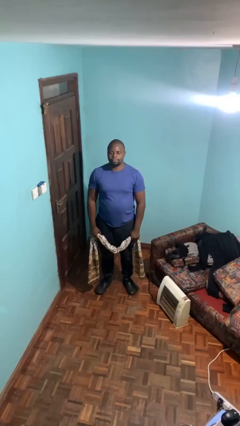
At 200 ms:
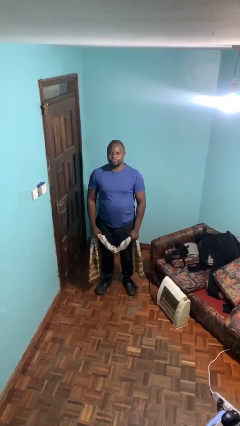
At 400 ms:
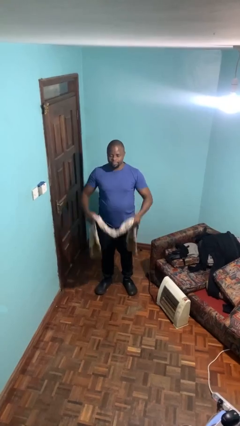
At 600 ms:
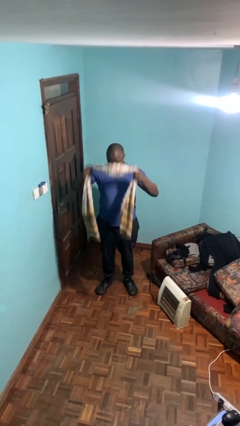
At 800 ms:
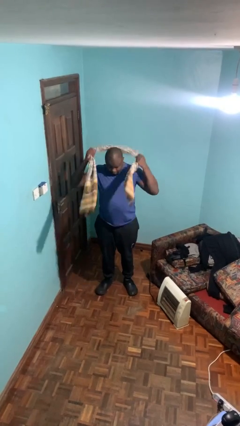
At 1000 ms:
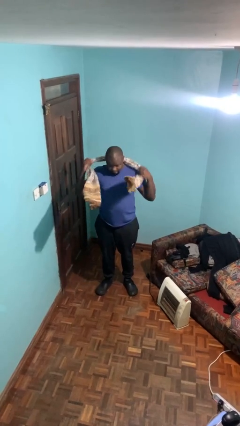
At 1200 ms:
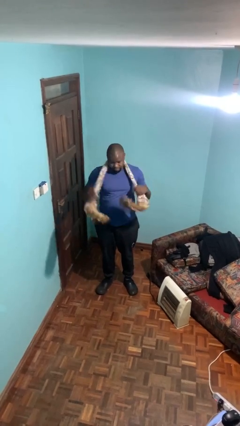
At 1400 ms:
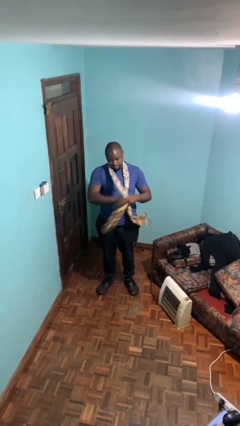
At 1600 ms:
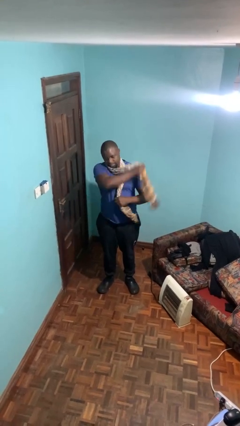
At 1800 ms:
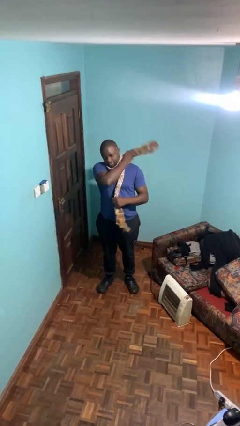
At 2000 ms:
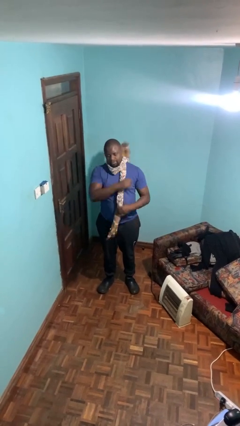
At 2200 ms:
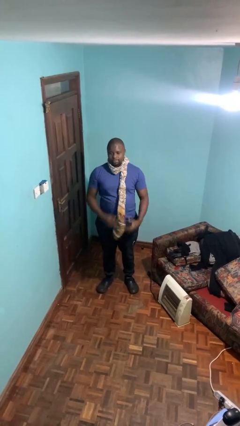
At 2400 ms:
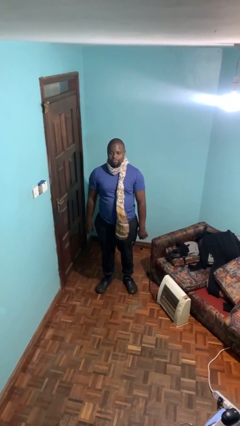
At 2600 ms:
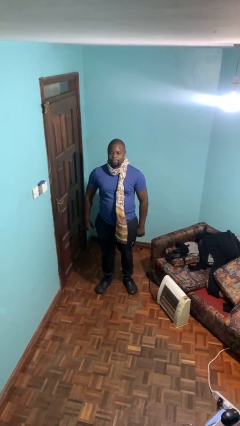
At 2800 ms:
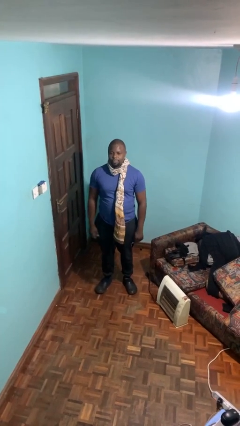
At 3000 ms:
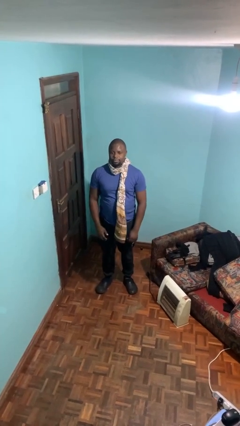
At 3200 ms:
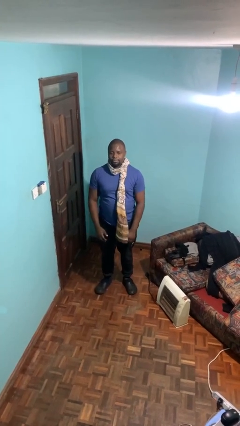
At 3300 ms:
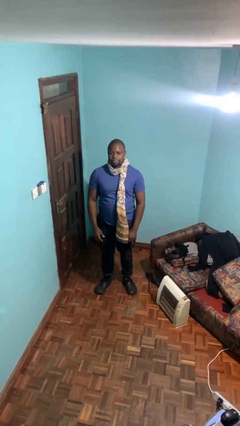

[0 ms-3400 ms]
person puts on scarf

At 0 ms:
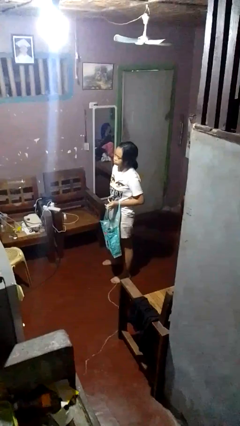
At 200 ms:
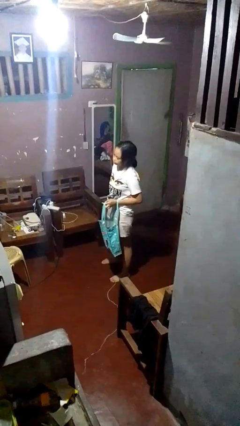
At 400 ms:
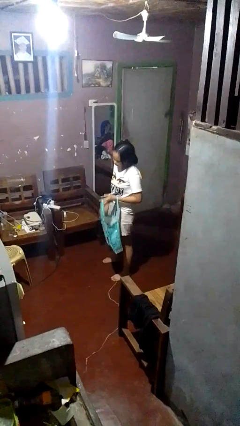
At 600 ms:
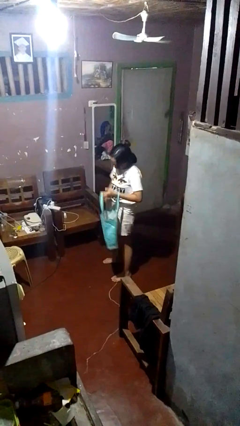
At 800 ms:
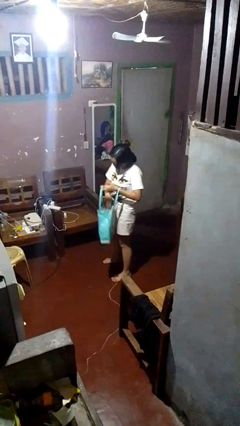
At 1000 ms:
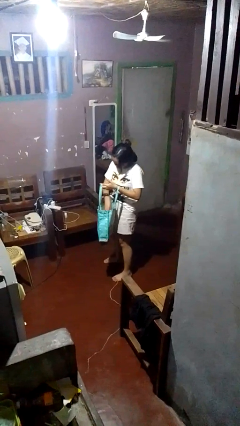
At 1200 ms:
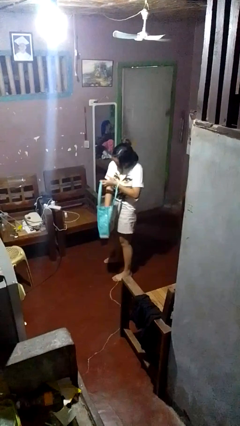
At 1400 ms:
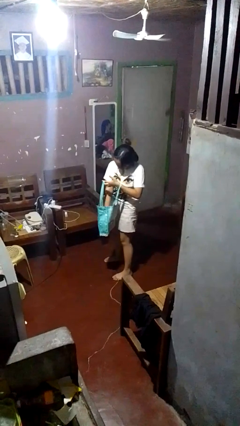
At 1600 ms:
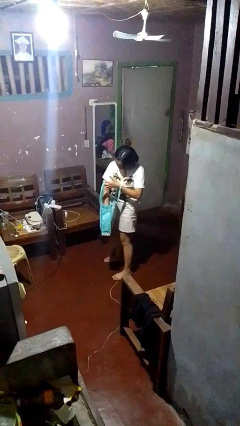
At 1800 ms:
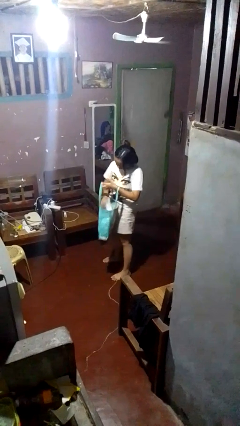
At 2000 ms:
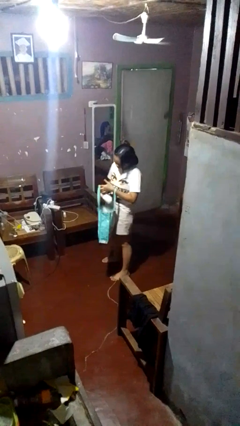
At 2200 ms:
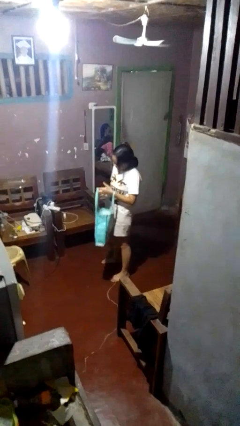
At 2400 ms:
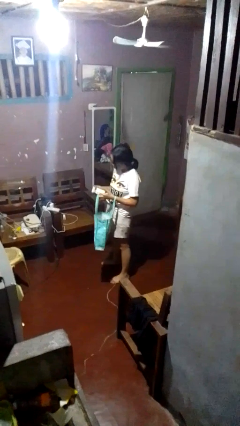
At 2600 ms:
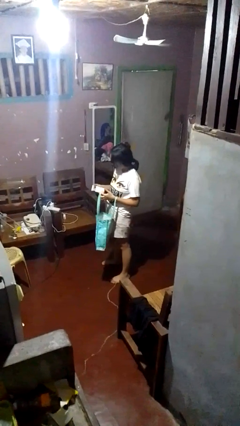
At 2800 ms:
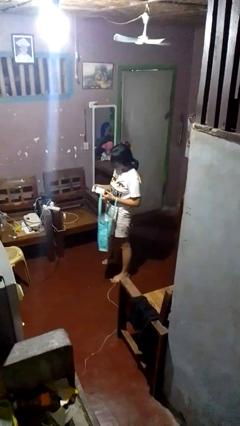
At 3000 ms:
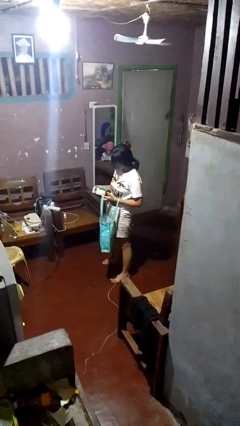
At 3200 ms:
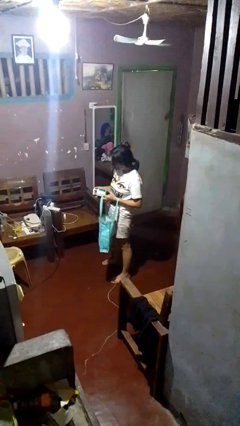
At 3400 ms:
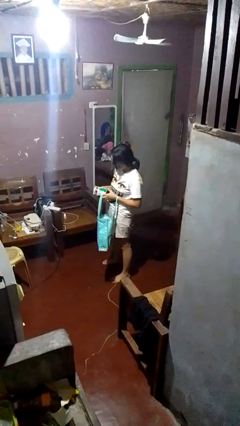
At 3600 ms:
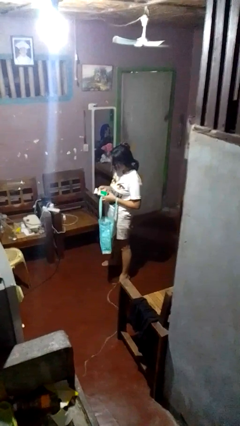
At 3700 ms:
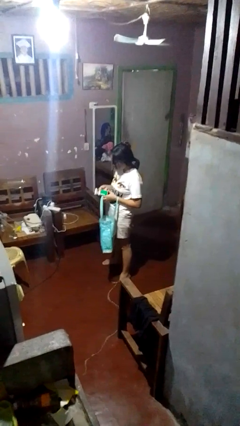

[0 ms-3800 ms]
person takes object from bag

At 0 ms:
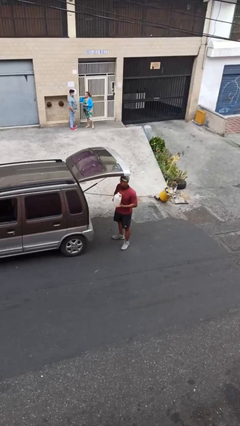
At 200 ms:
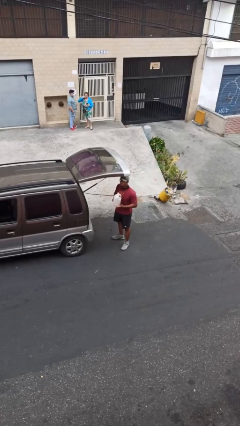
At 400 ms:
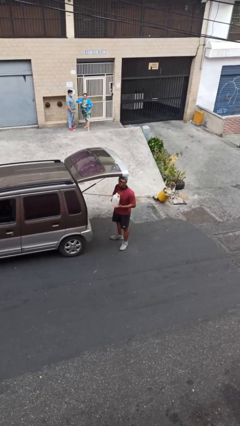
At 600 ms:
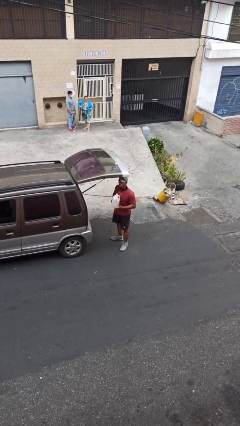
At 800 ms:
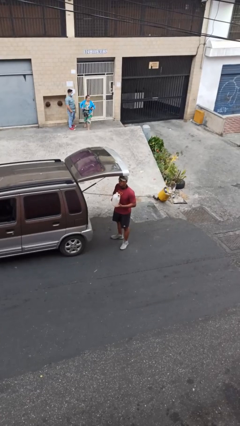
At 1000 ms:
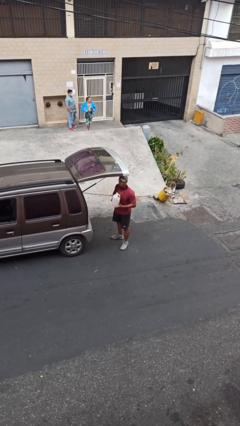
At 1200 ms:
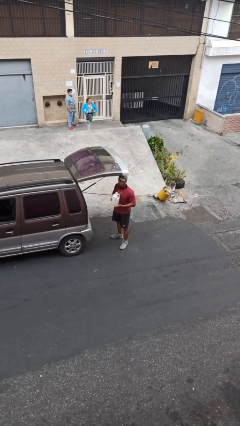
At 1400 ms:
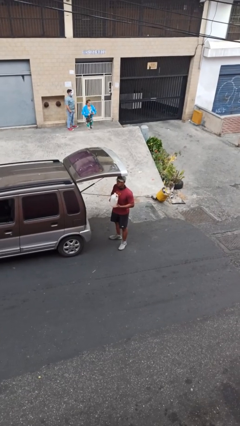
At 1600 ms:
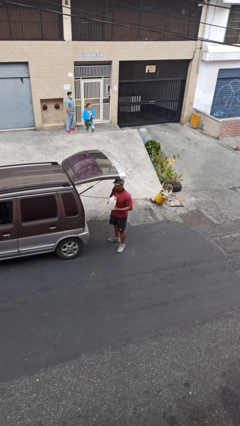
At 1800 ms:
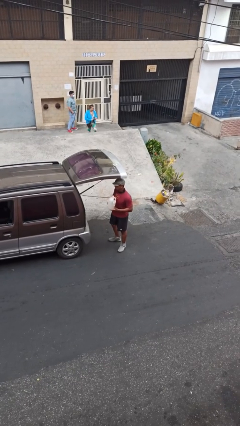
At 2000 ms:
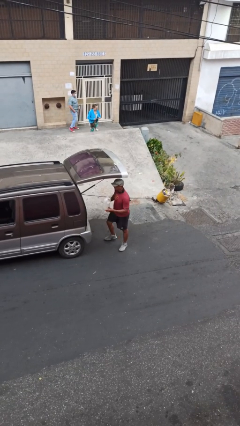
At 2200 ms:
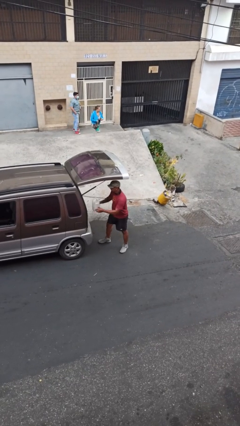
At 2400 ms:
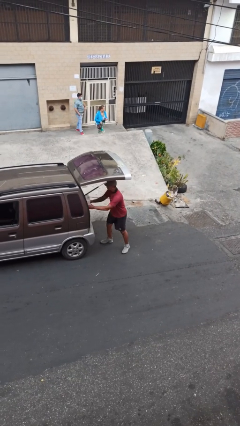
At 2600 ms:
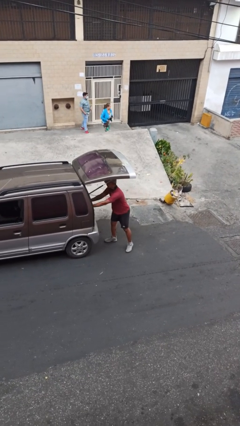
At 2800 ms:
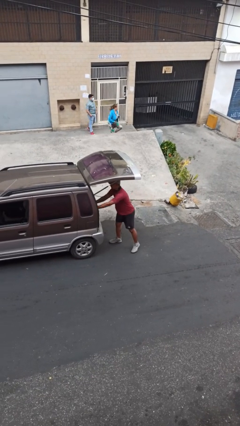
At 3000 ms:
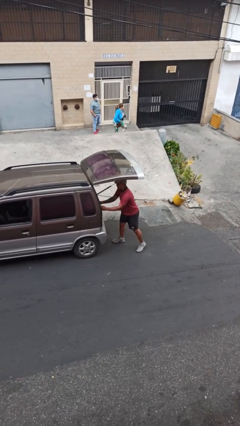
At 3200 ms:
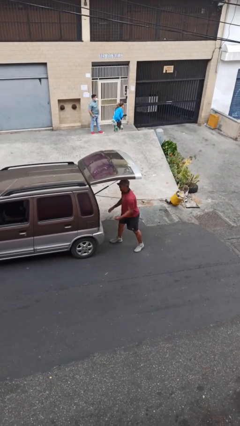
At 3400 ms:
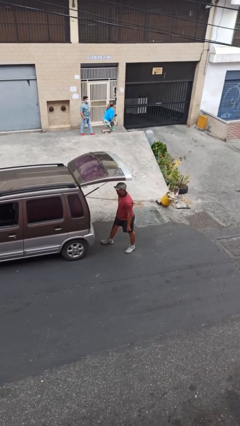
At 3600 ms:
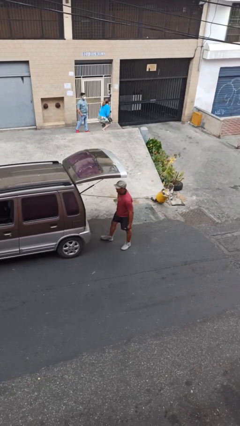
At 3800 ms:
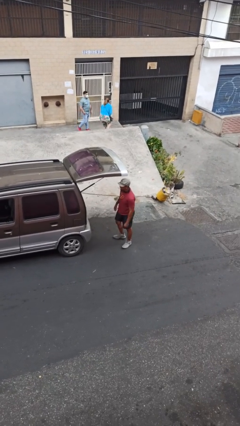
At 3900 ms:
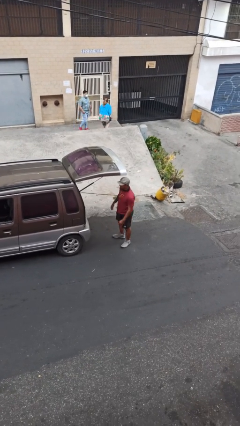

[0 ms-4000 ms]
person loads car

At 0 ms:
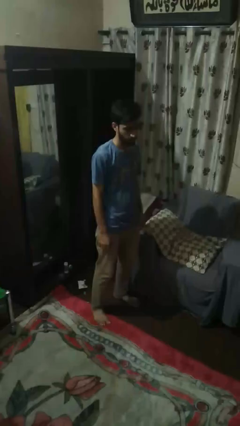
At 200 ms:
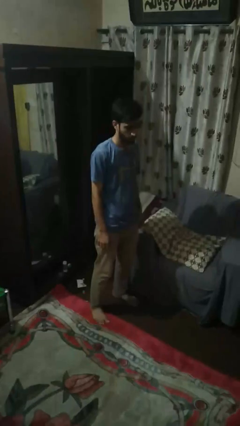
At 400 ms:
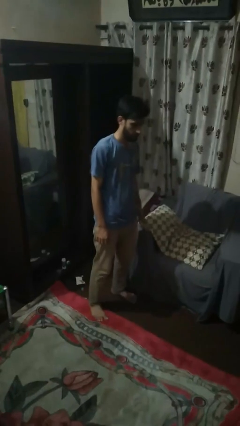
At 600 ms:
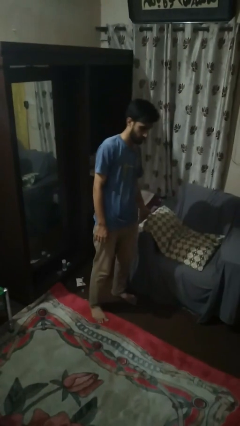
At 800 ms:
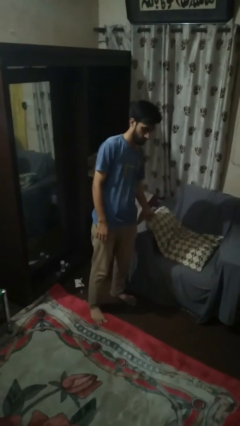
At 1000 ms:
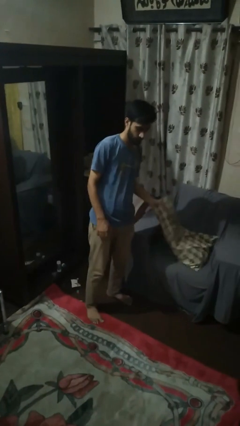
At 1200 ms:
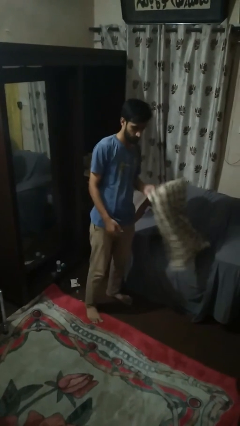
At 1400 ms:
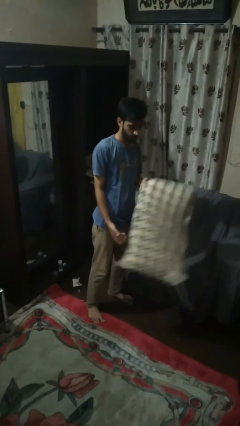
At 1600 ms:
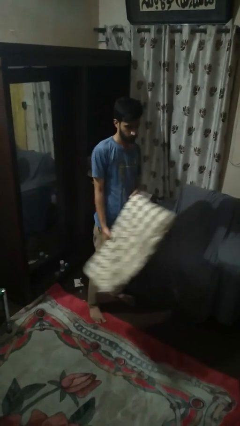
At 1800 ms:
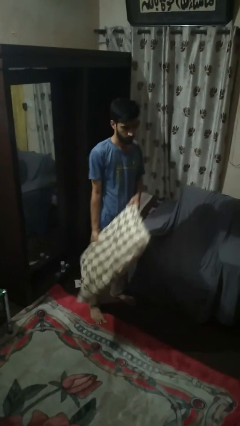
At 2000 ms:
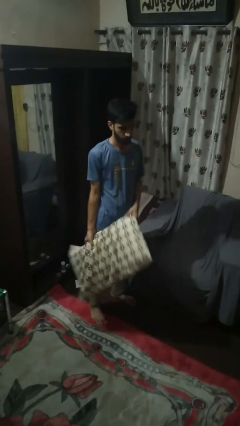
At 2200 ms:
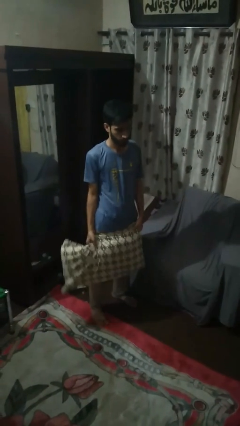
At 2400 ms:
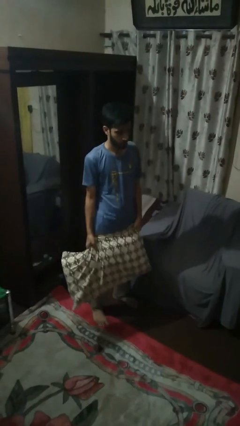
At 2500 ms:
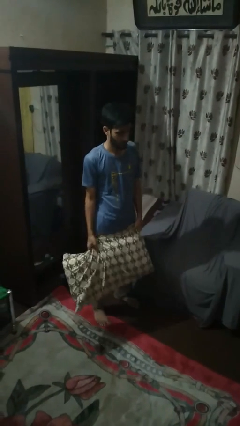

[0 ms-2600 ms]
person picks up object from couch

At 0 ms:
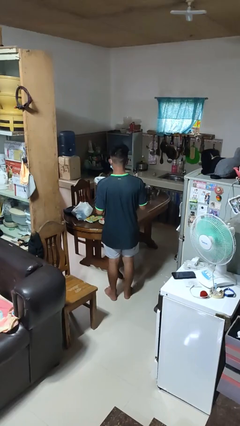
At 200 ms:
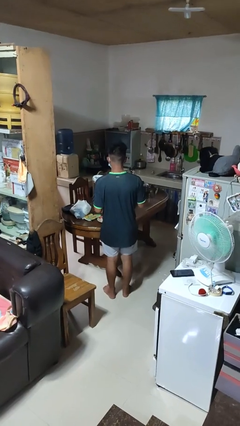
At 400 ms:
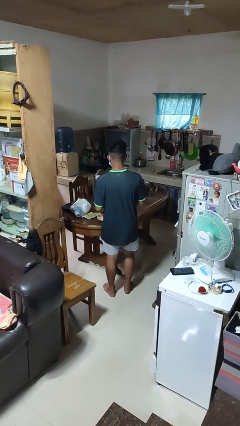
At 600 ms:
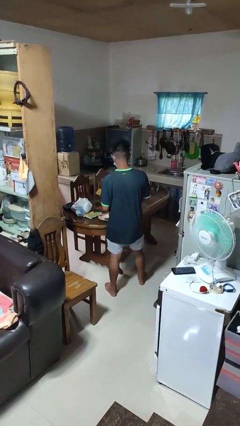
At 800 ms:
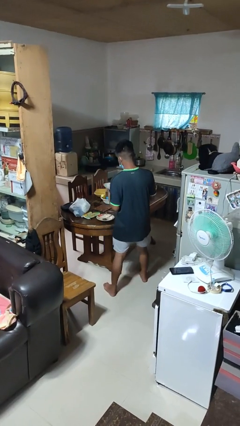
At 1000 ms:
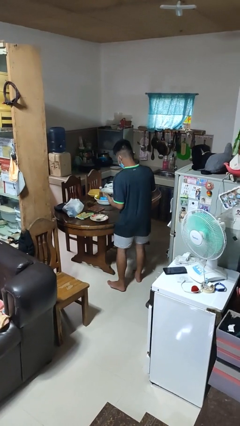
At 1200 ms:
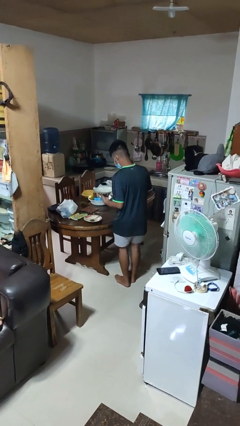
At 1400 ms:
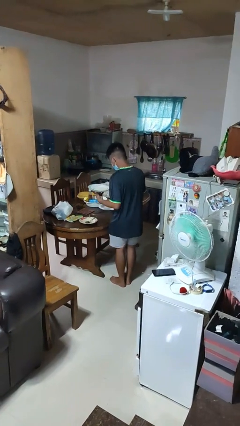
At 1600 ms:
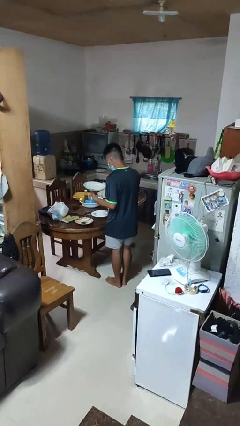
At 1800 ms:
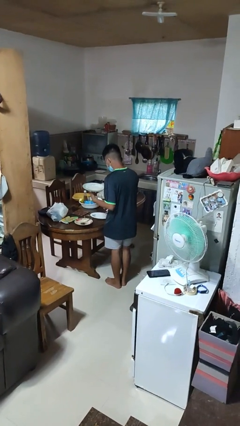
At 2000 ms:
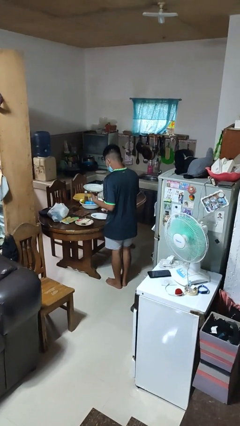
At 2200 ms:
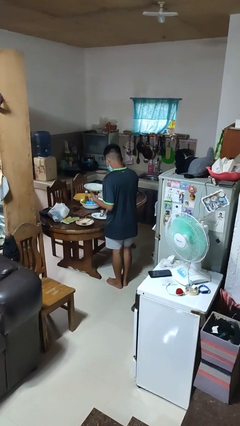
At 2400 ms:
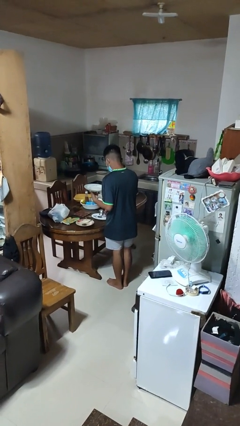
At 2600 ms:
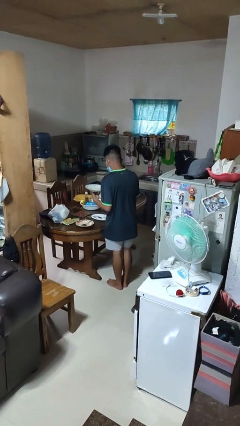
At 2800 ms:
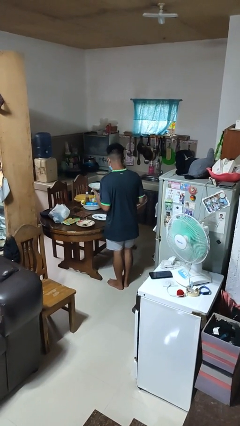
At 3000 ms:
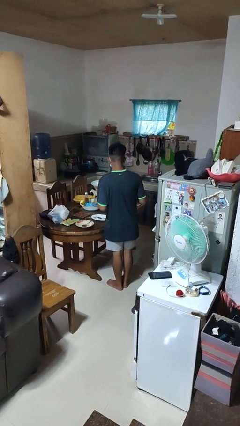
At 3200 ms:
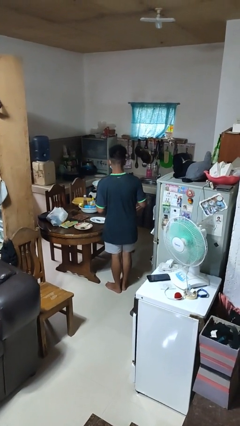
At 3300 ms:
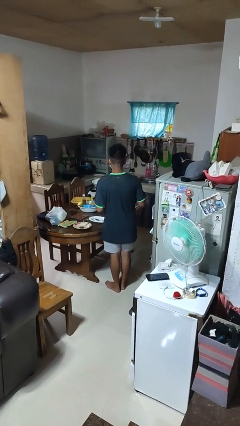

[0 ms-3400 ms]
person sets table

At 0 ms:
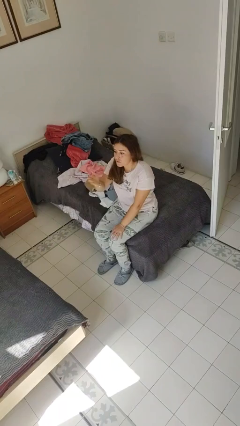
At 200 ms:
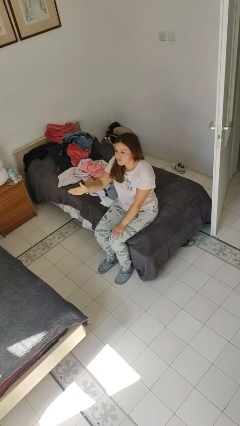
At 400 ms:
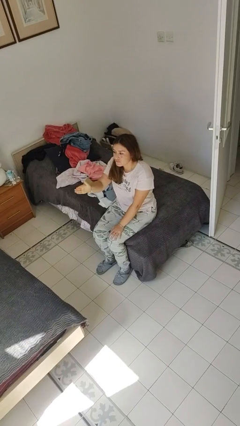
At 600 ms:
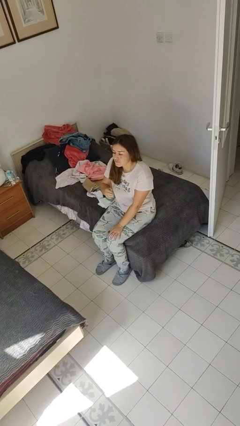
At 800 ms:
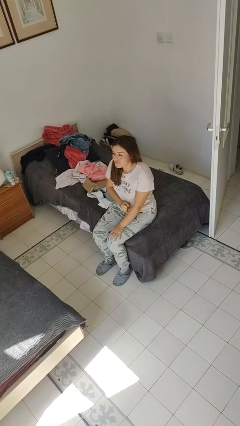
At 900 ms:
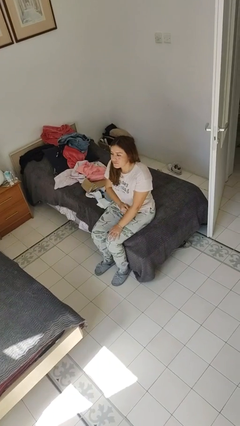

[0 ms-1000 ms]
person gestures blow kiss
